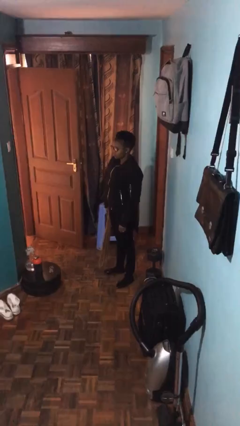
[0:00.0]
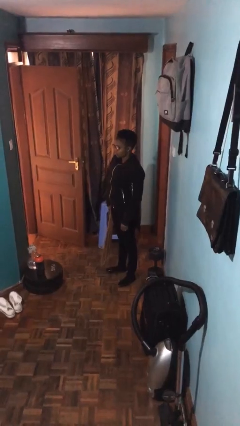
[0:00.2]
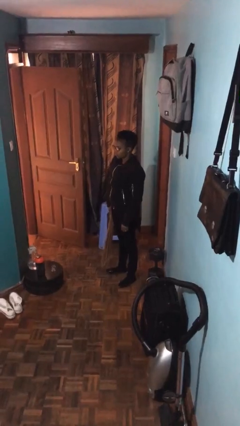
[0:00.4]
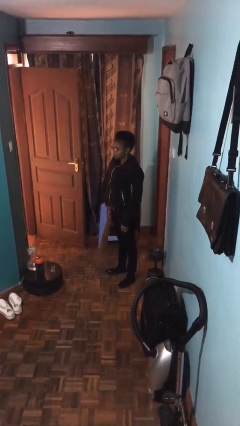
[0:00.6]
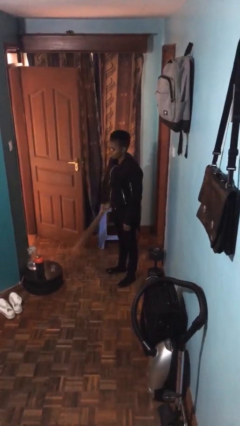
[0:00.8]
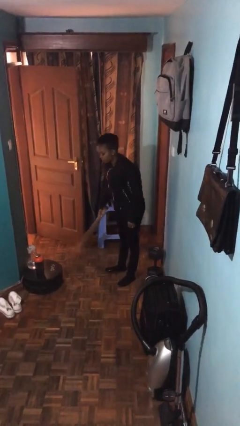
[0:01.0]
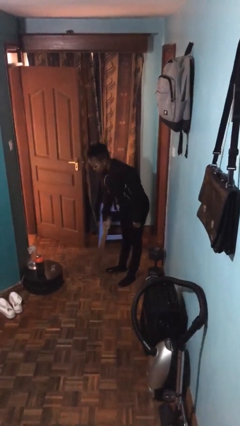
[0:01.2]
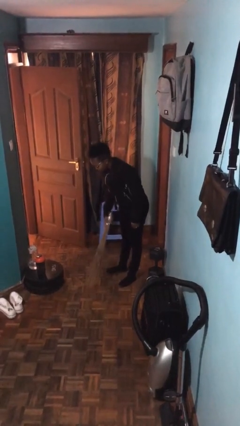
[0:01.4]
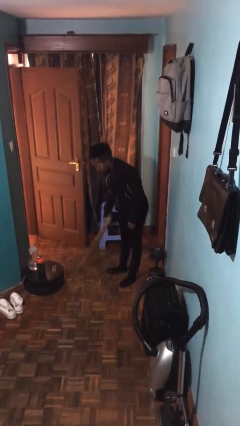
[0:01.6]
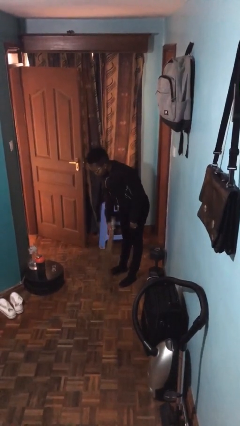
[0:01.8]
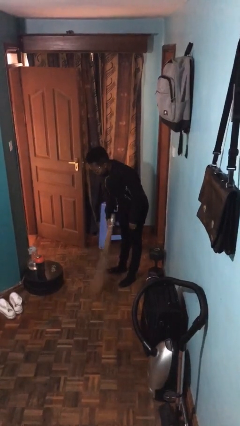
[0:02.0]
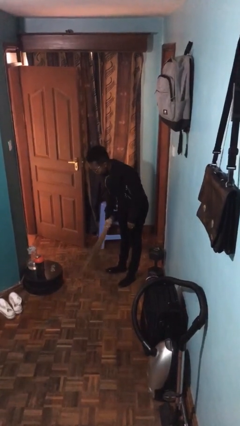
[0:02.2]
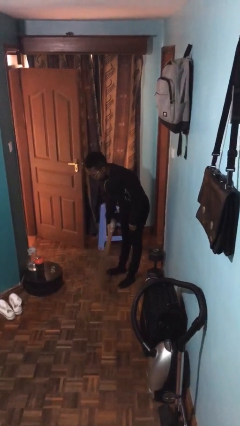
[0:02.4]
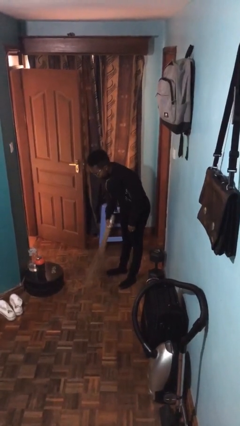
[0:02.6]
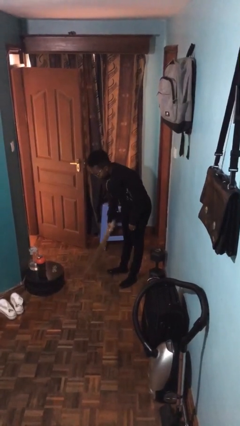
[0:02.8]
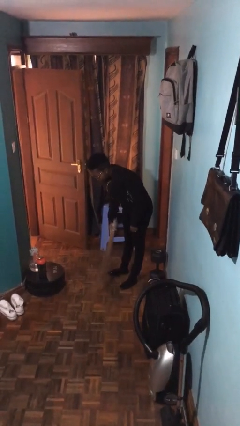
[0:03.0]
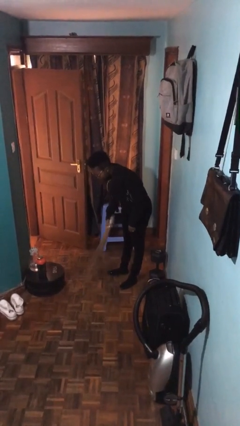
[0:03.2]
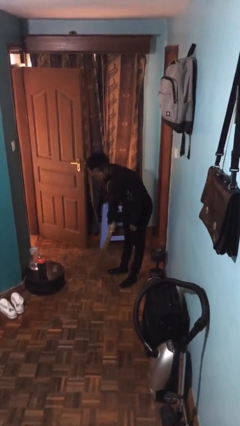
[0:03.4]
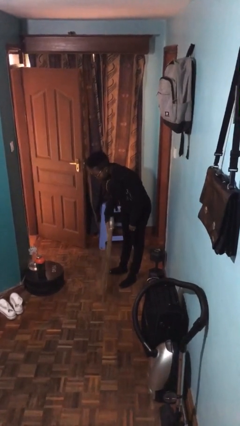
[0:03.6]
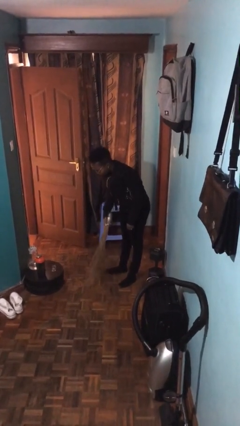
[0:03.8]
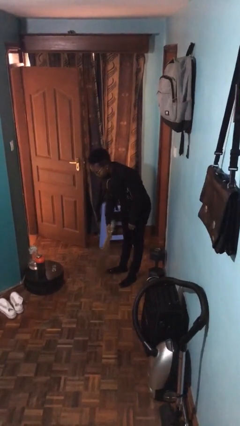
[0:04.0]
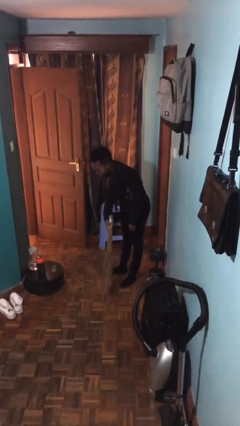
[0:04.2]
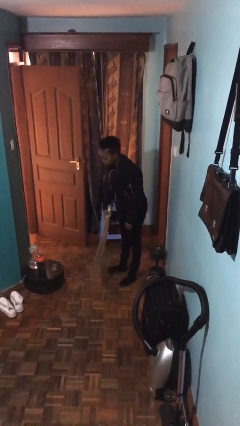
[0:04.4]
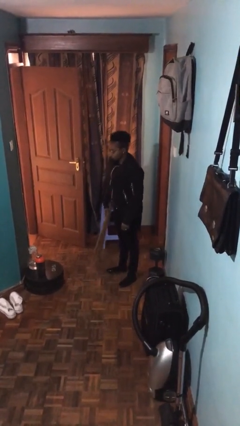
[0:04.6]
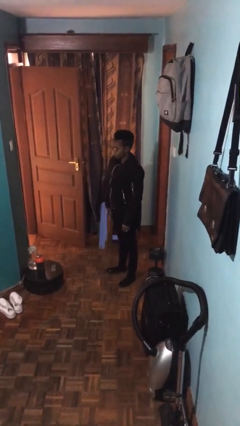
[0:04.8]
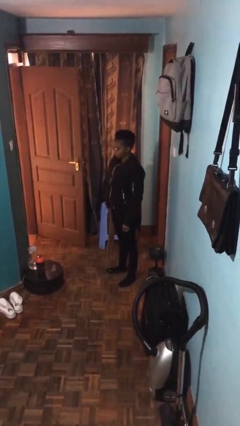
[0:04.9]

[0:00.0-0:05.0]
person sweeps floor

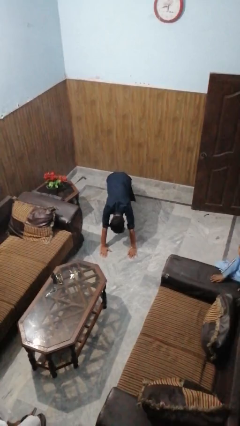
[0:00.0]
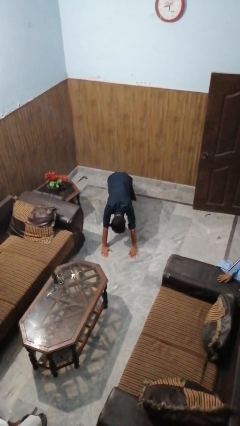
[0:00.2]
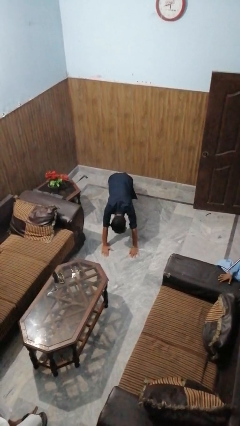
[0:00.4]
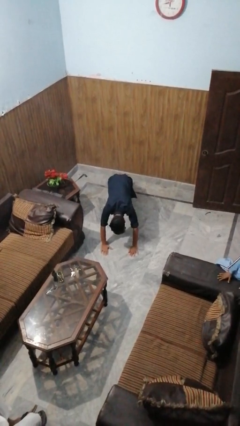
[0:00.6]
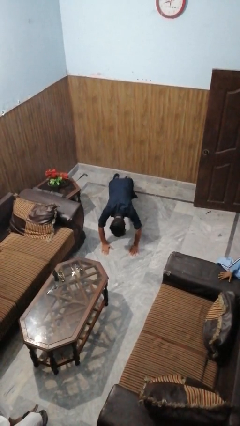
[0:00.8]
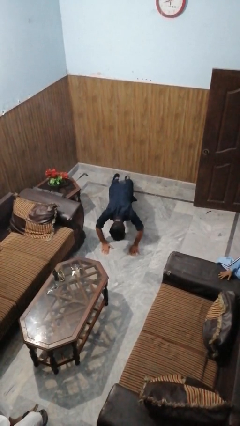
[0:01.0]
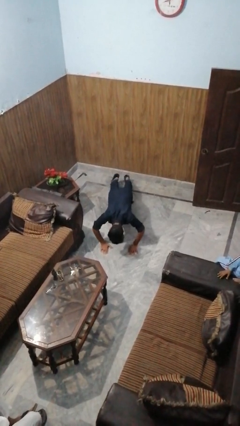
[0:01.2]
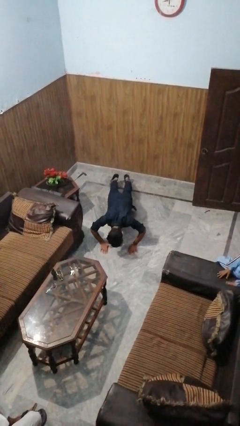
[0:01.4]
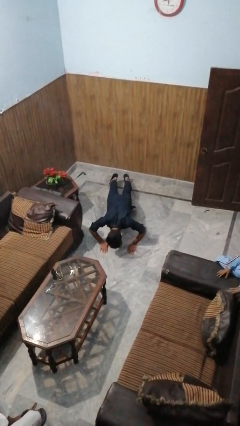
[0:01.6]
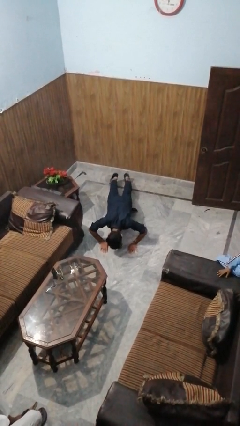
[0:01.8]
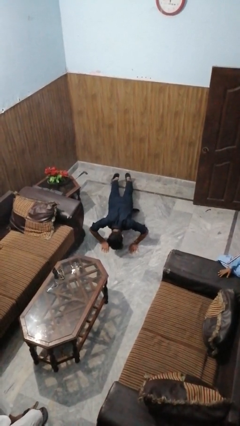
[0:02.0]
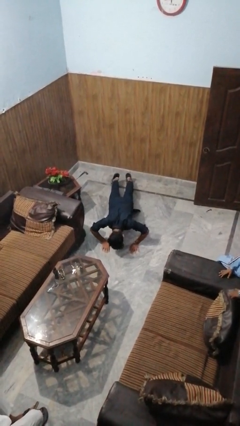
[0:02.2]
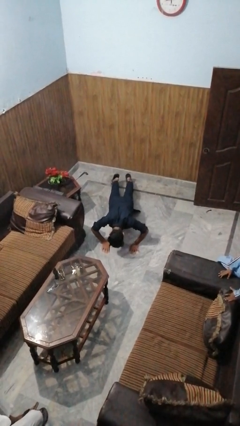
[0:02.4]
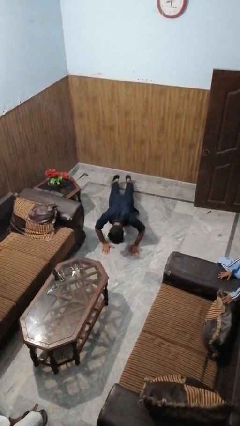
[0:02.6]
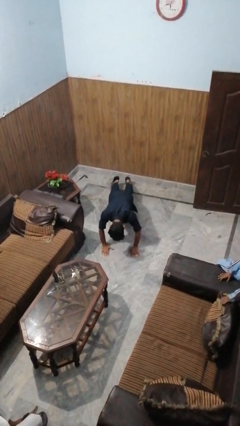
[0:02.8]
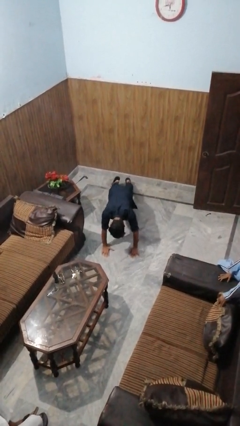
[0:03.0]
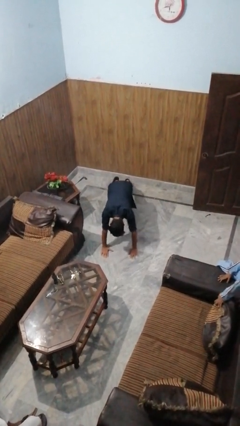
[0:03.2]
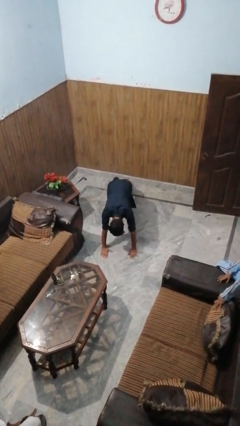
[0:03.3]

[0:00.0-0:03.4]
person exercises with pushup

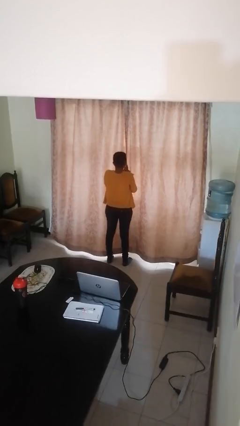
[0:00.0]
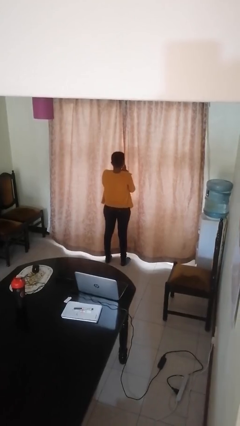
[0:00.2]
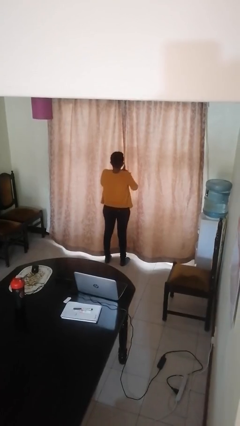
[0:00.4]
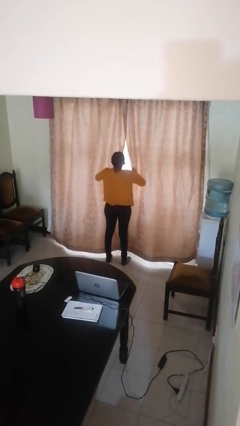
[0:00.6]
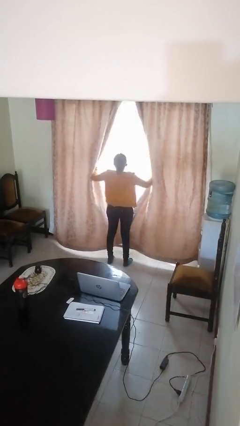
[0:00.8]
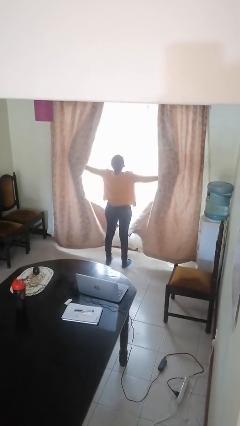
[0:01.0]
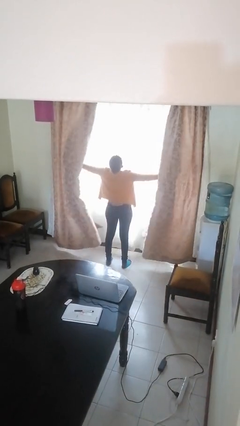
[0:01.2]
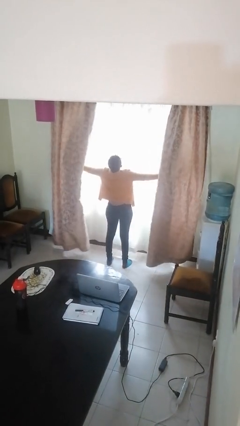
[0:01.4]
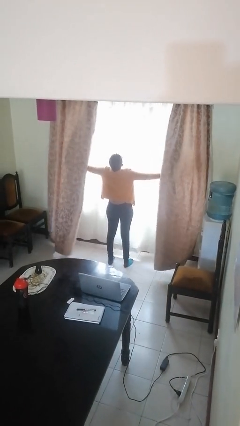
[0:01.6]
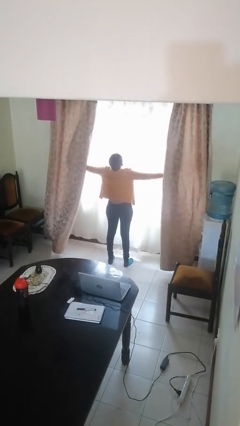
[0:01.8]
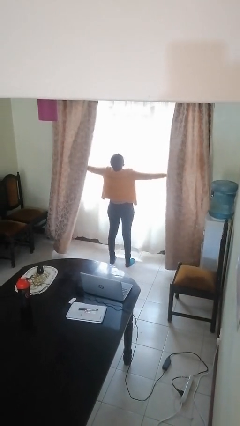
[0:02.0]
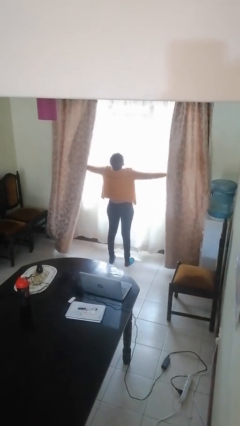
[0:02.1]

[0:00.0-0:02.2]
person opens curtains

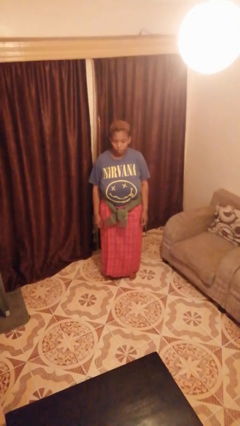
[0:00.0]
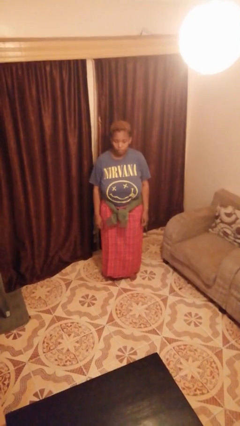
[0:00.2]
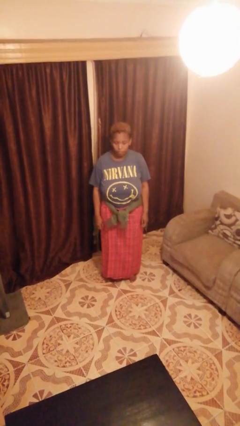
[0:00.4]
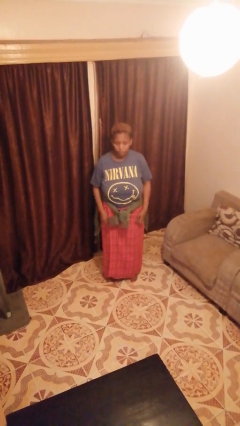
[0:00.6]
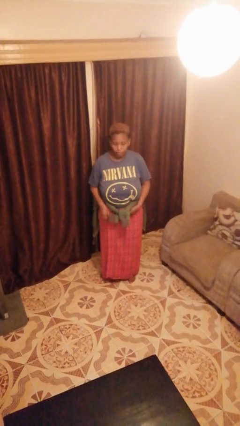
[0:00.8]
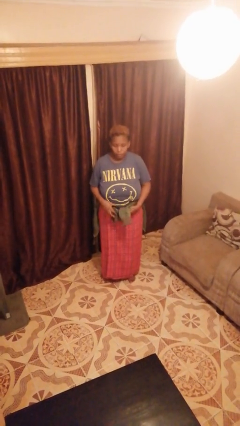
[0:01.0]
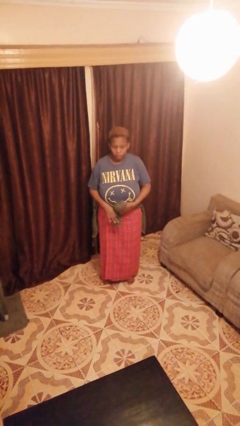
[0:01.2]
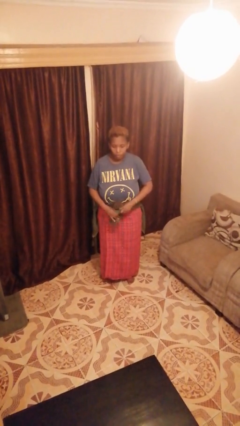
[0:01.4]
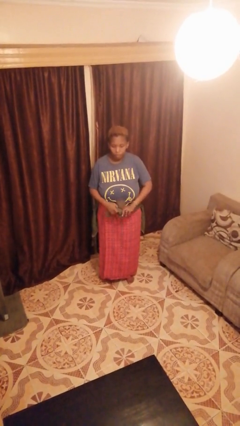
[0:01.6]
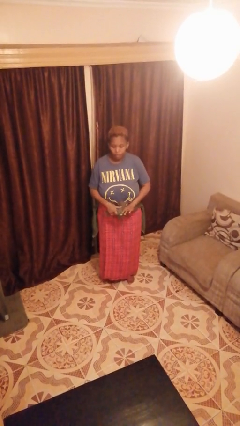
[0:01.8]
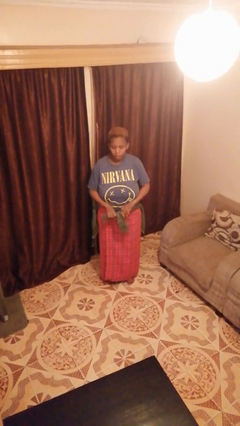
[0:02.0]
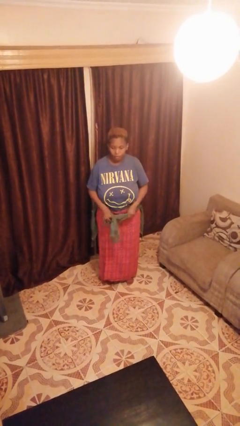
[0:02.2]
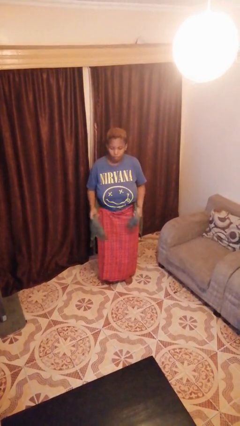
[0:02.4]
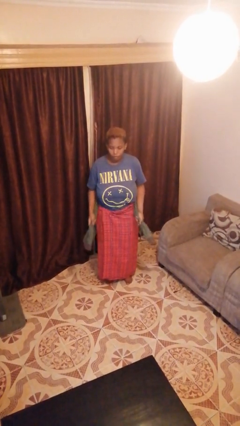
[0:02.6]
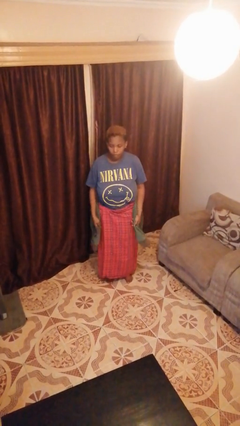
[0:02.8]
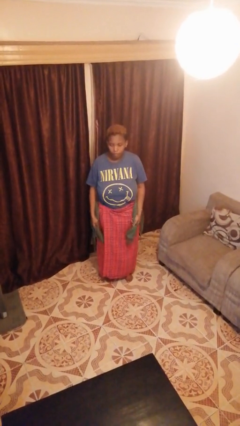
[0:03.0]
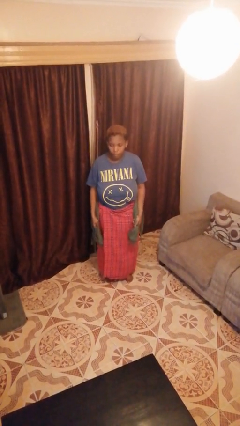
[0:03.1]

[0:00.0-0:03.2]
person unties jacket around waist

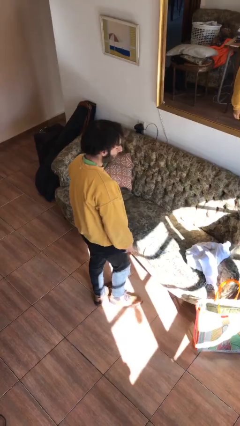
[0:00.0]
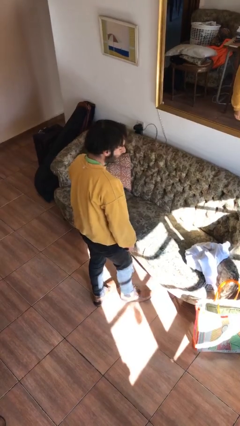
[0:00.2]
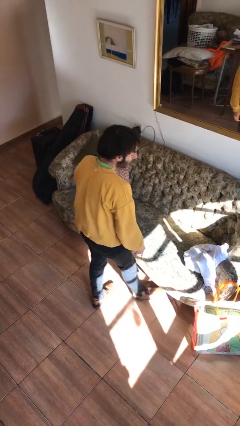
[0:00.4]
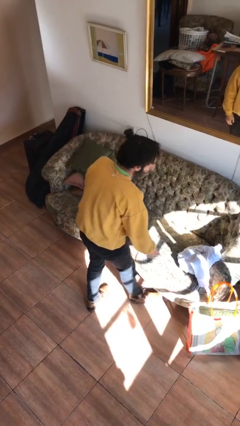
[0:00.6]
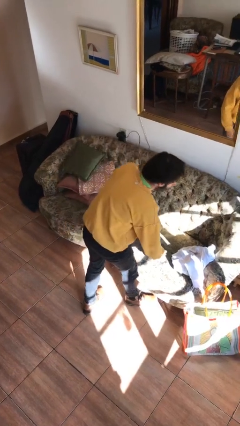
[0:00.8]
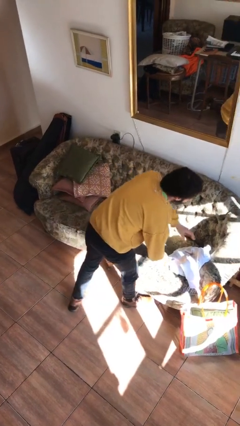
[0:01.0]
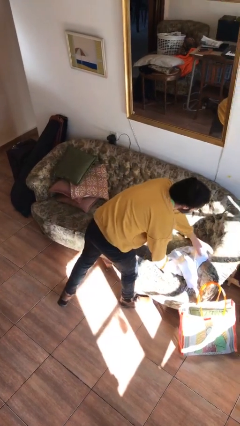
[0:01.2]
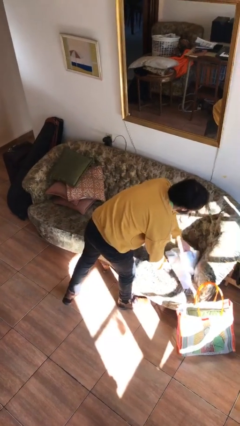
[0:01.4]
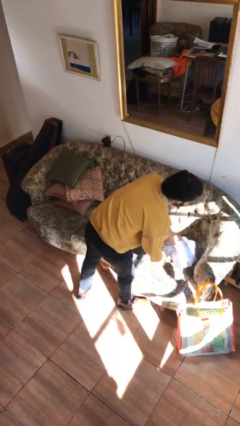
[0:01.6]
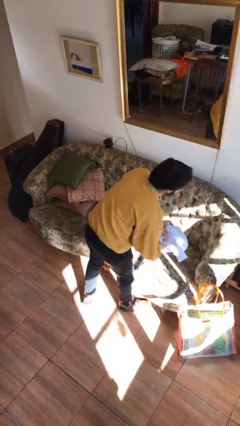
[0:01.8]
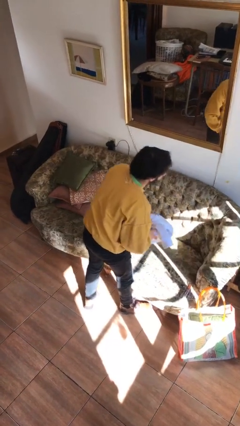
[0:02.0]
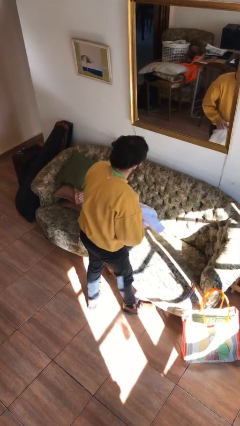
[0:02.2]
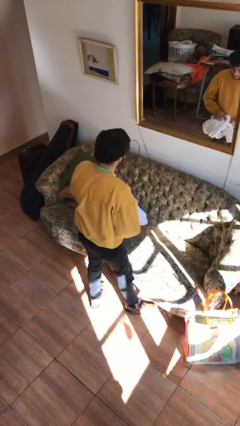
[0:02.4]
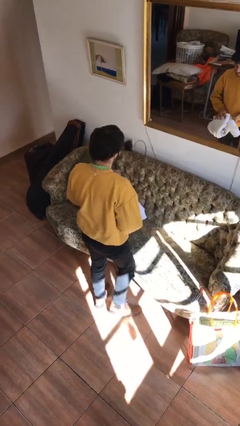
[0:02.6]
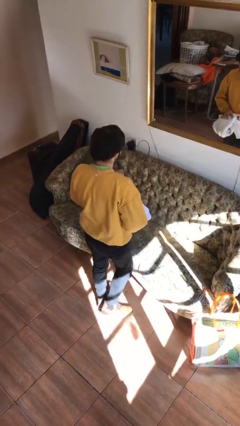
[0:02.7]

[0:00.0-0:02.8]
person picks up object from couch

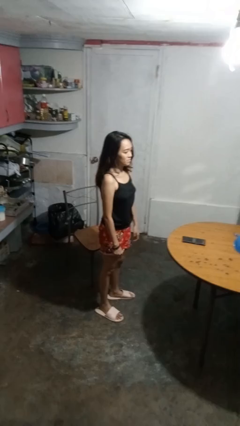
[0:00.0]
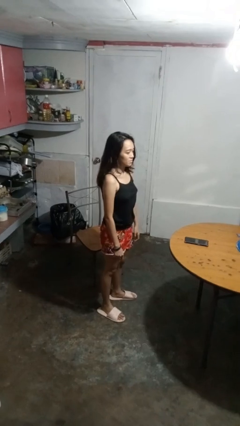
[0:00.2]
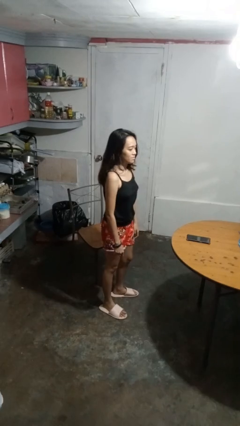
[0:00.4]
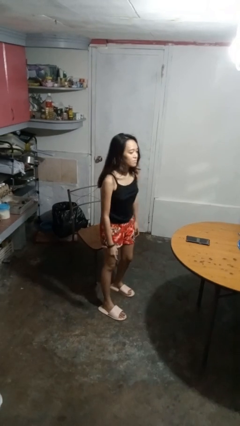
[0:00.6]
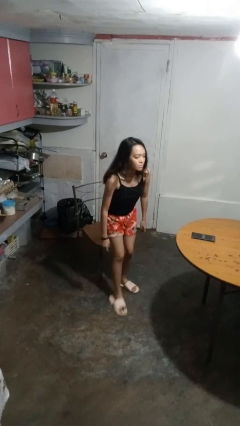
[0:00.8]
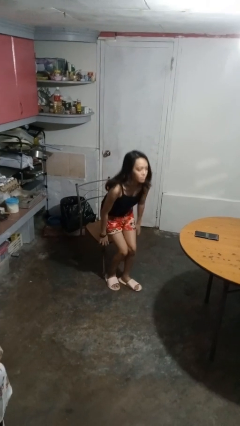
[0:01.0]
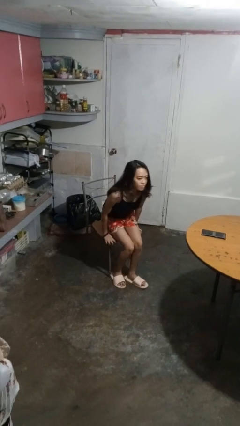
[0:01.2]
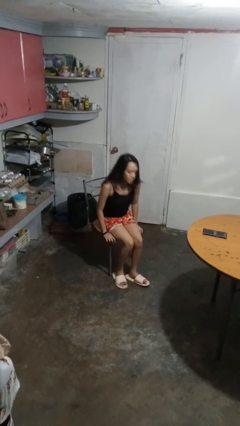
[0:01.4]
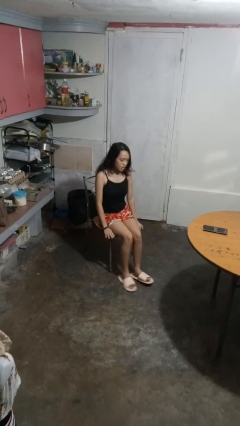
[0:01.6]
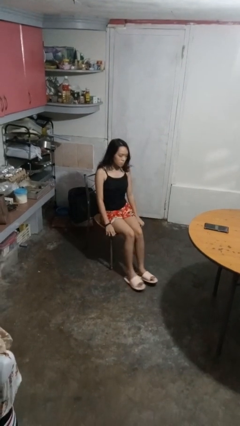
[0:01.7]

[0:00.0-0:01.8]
person sits down
